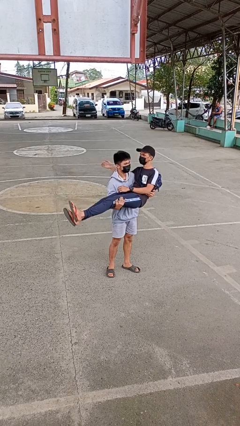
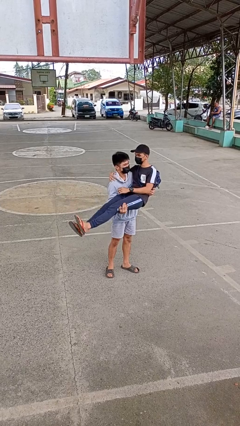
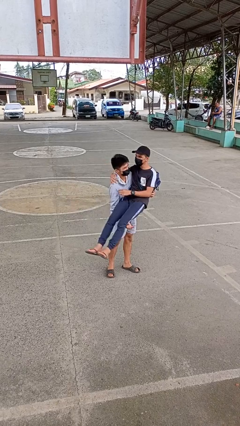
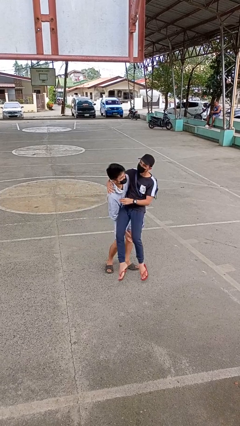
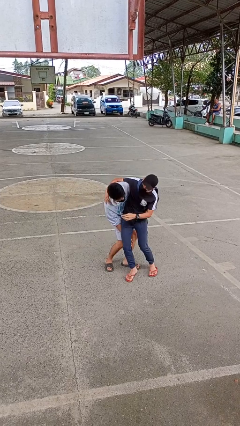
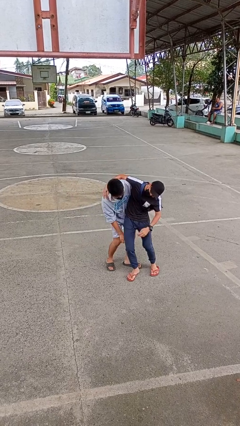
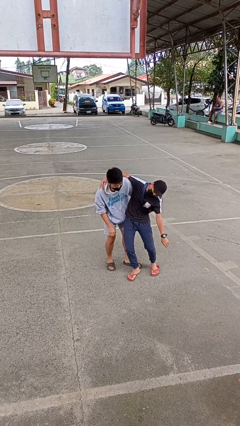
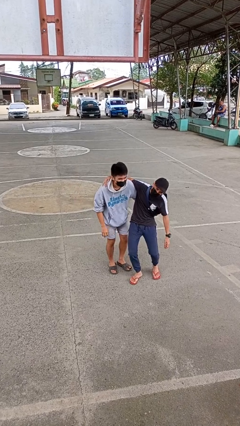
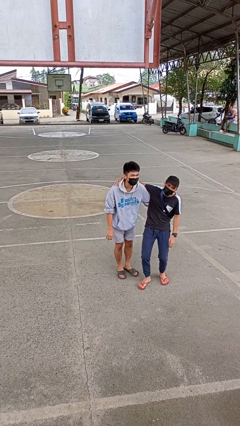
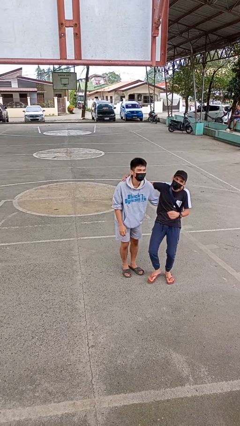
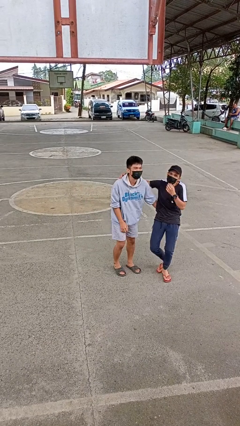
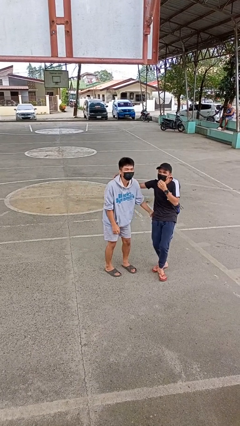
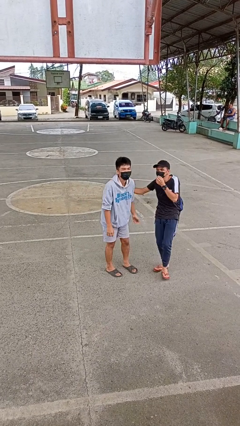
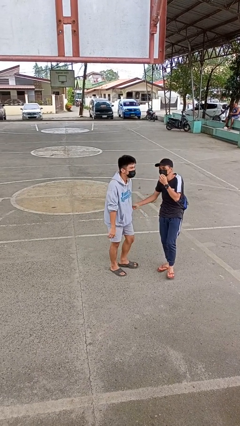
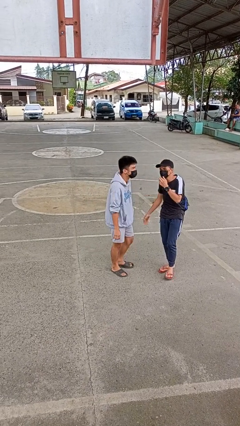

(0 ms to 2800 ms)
person puts down person

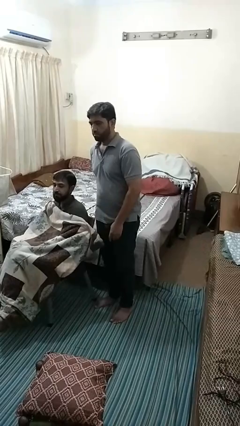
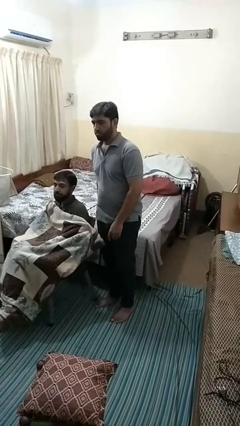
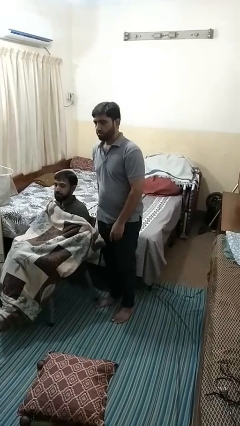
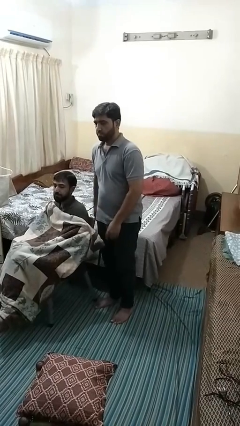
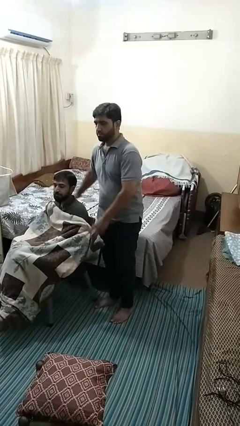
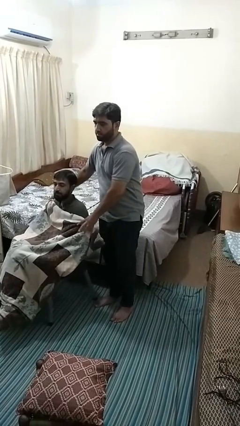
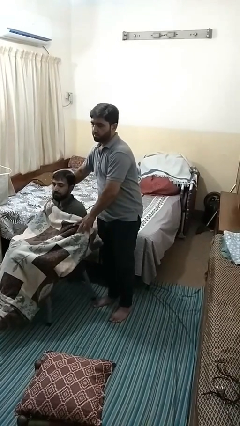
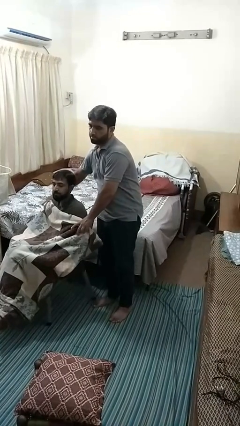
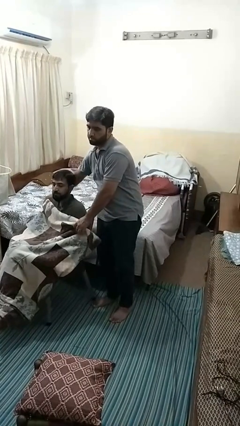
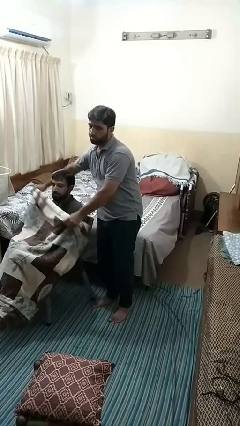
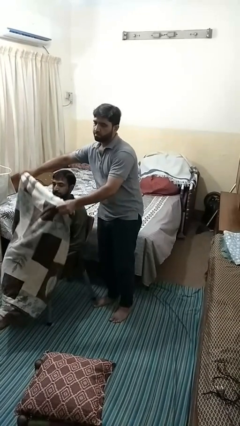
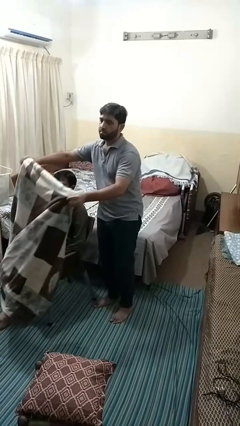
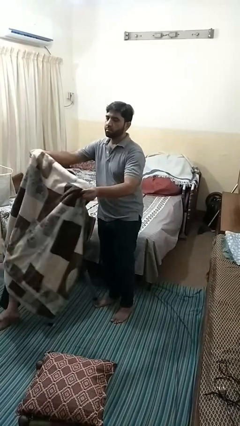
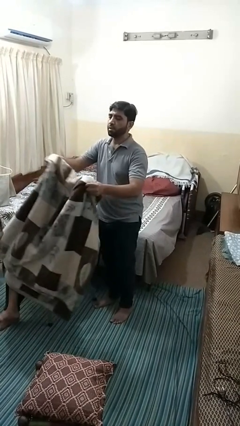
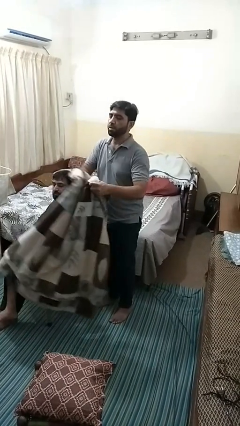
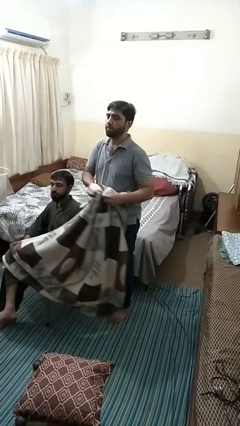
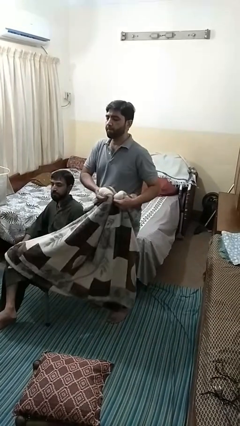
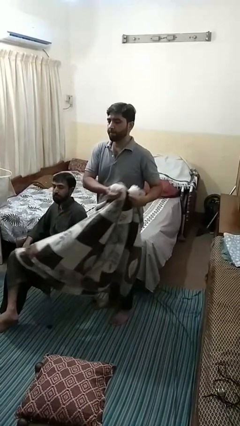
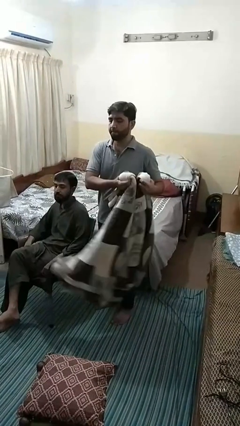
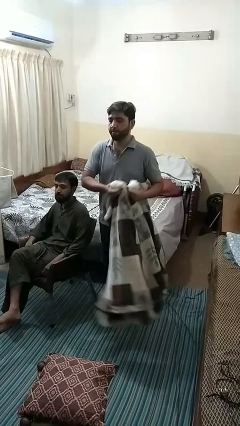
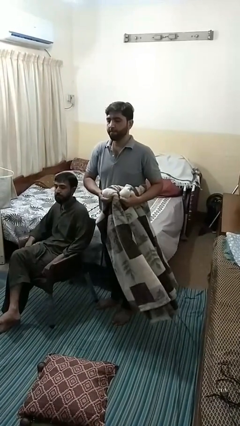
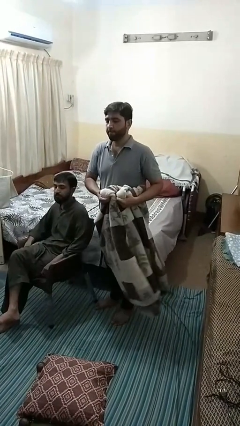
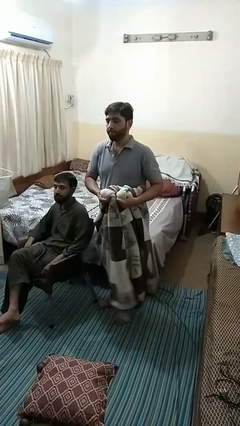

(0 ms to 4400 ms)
person uncovers friend with blanket

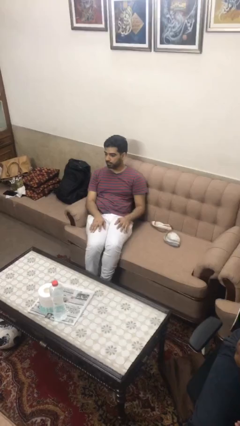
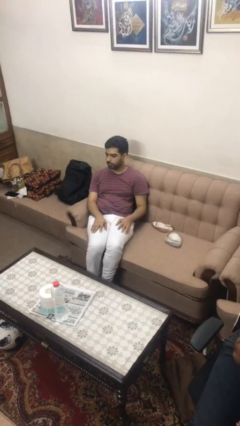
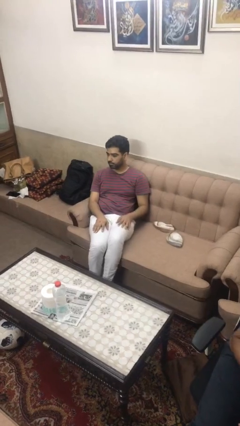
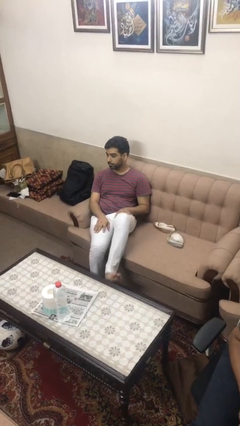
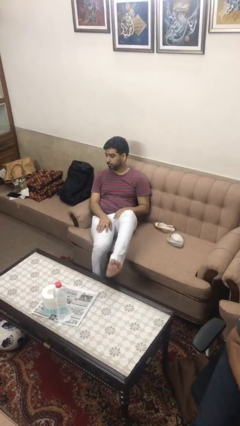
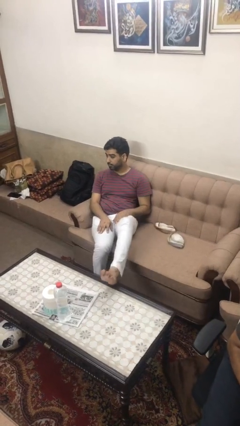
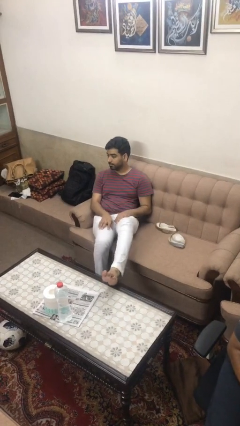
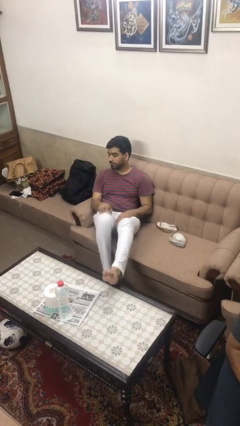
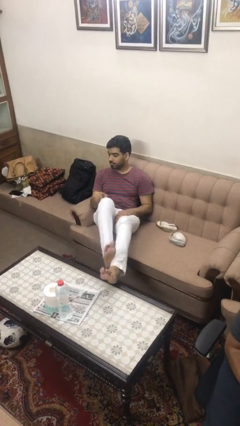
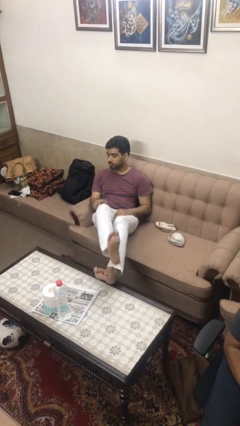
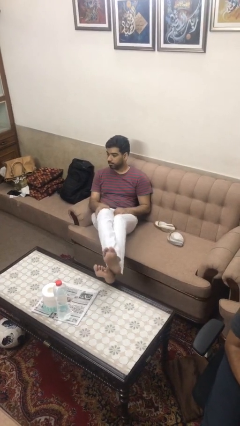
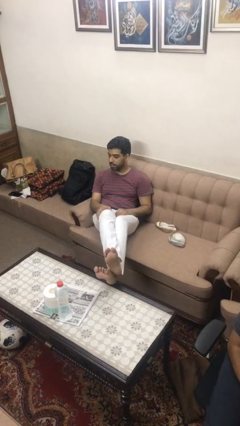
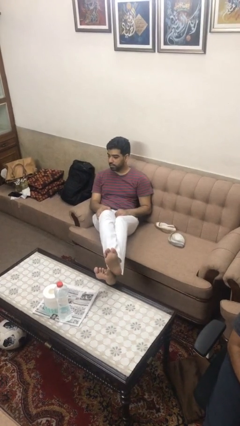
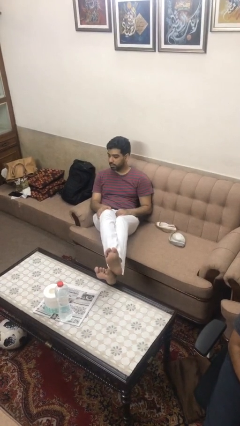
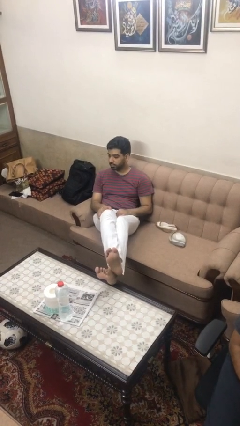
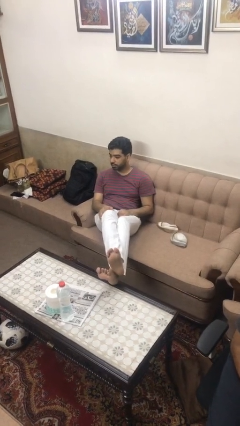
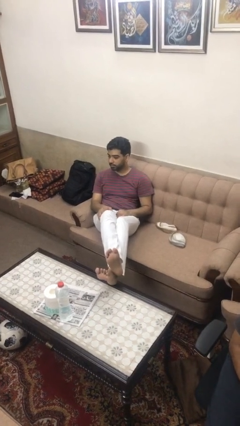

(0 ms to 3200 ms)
person puts feet up

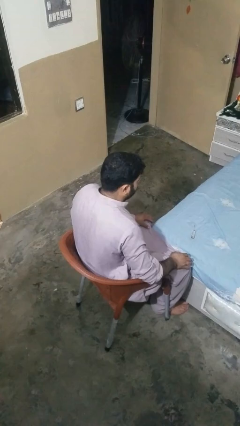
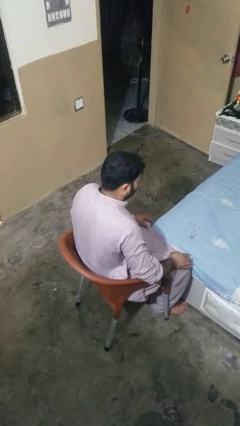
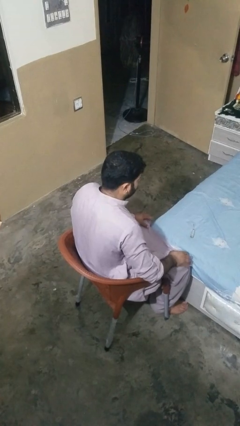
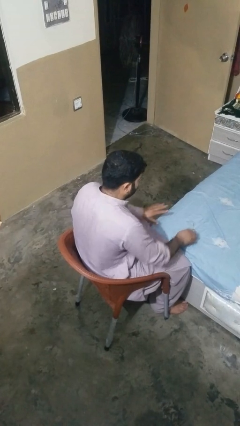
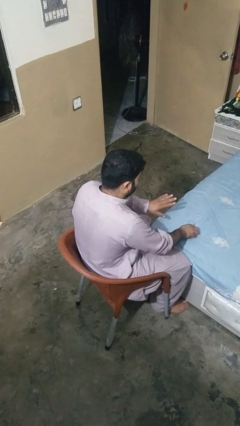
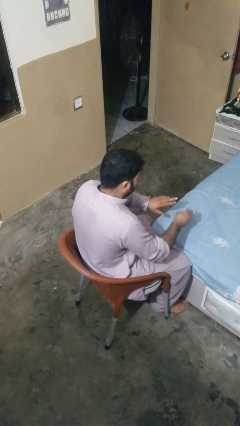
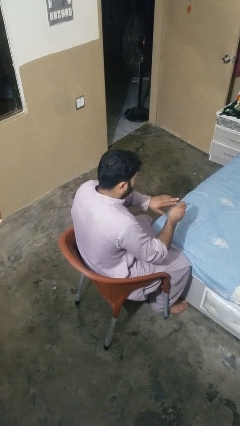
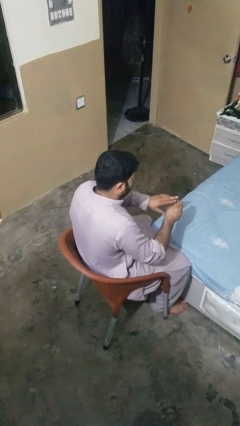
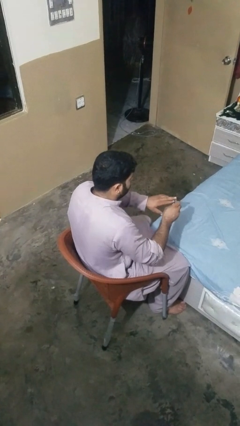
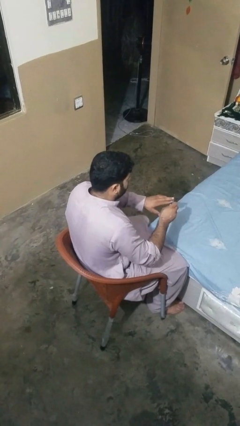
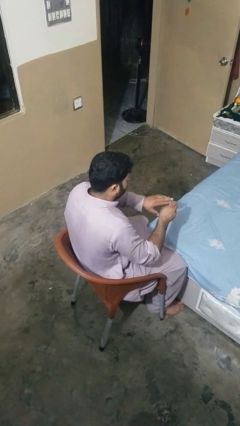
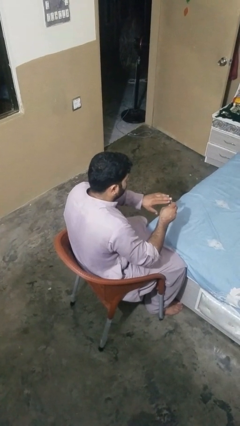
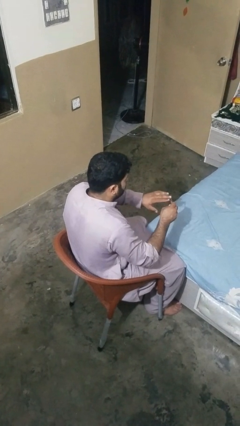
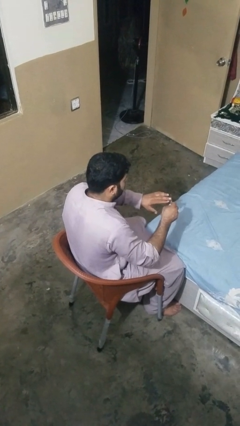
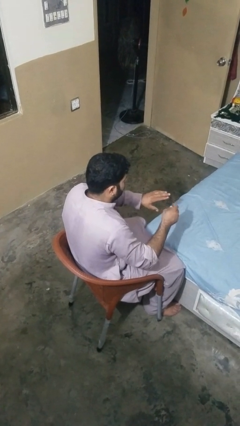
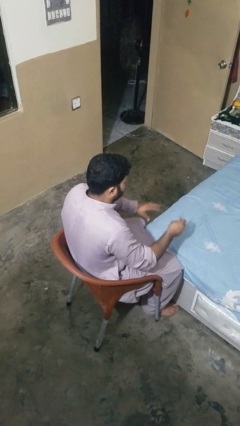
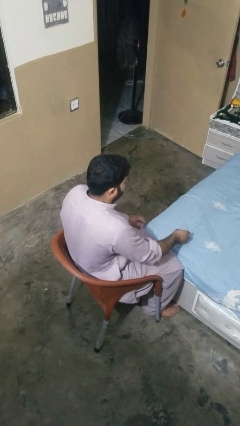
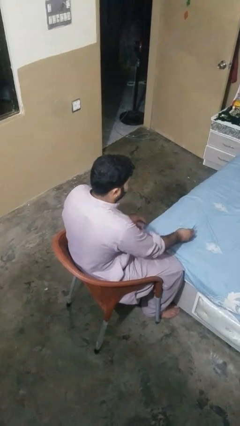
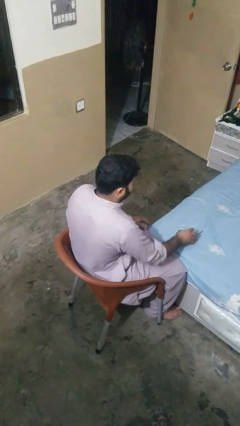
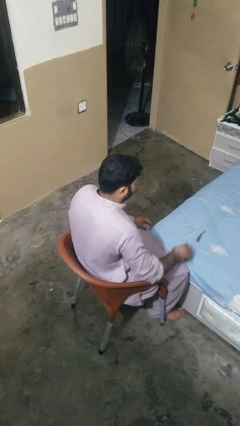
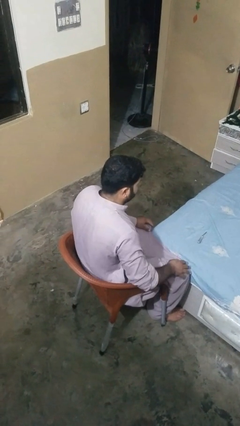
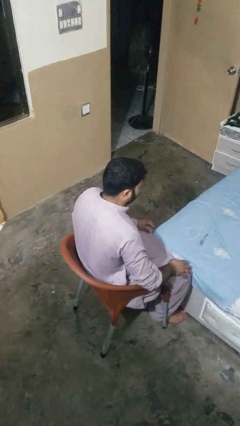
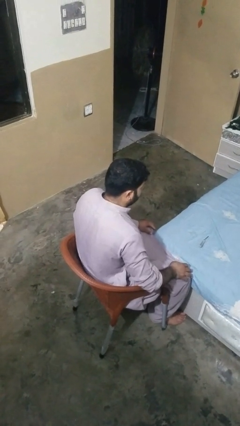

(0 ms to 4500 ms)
person files fingernails

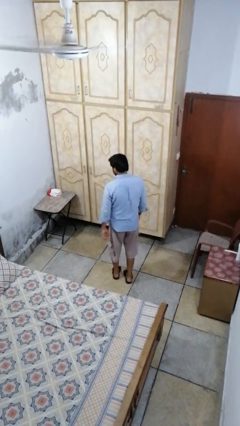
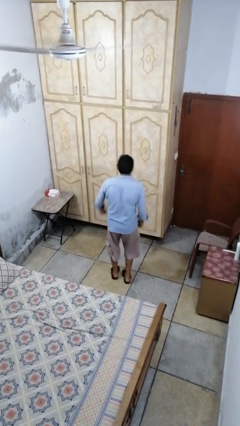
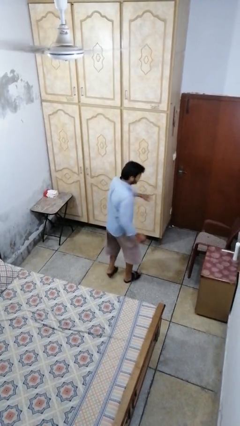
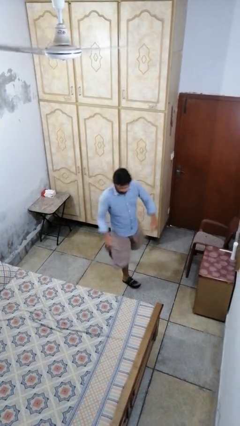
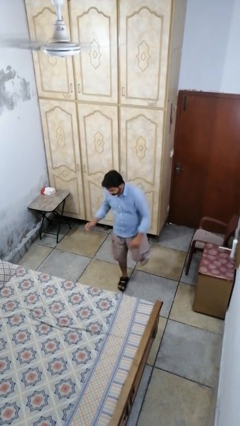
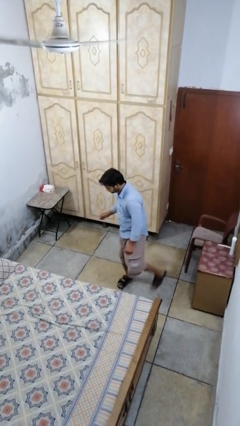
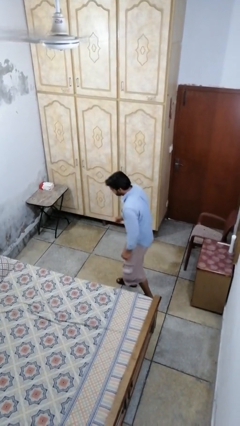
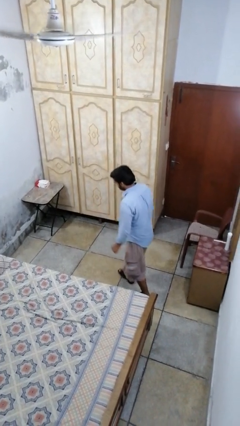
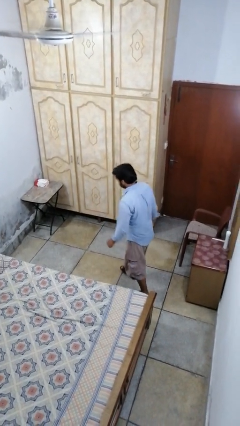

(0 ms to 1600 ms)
person twirls

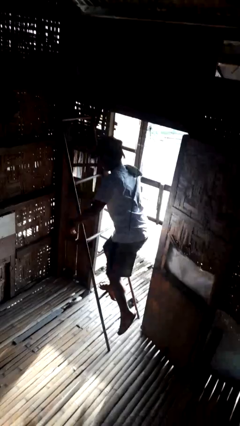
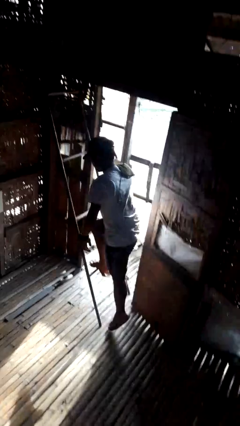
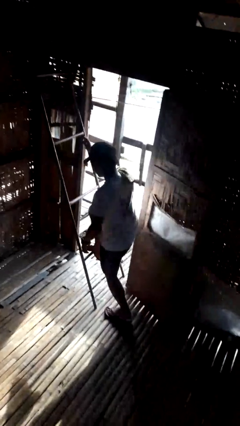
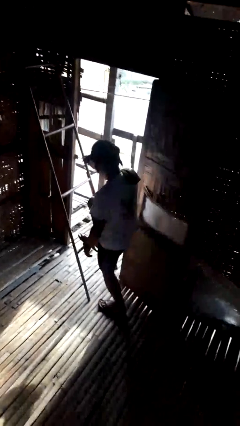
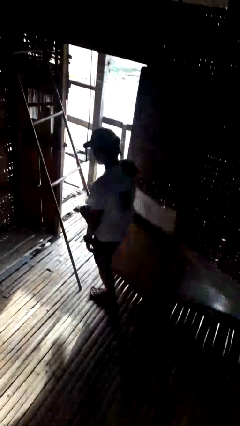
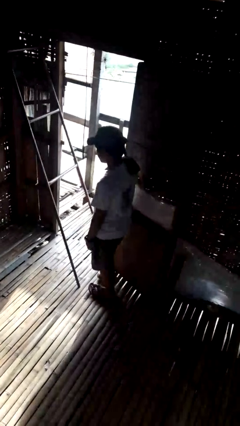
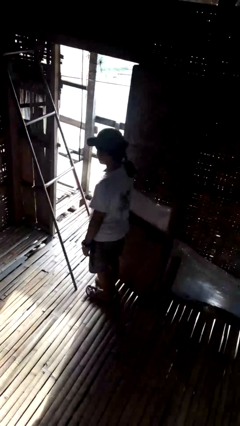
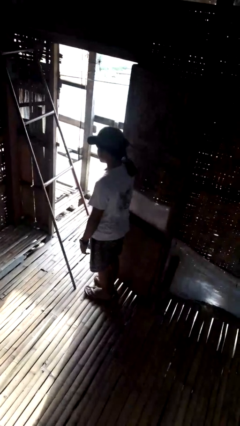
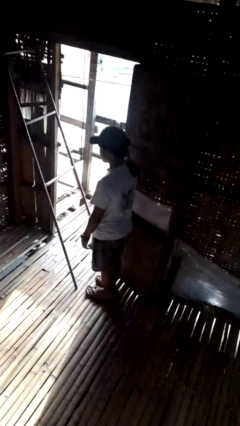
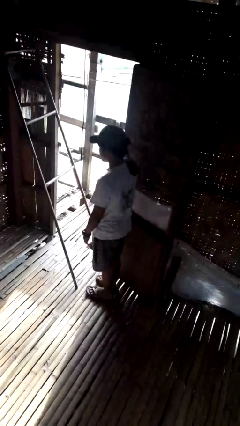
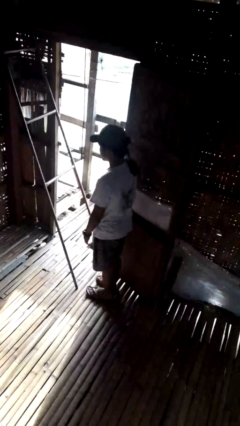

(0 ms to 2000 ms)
person climbs down ladder
